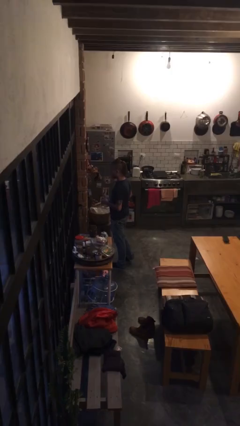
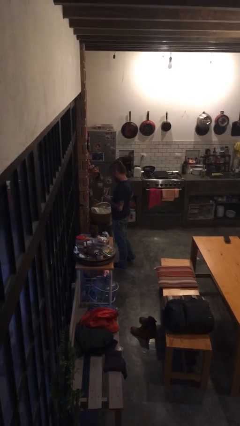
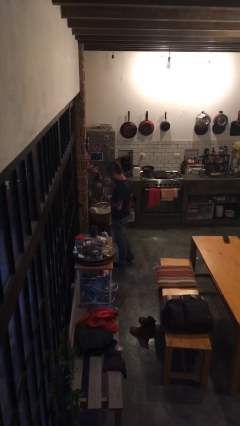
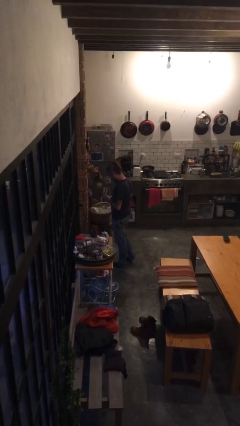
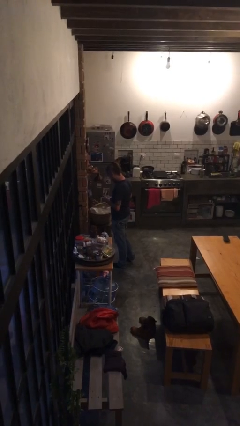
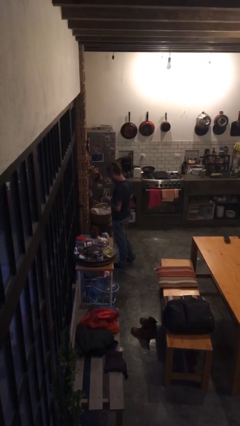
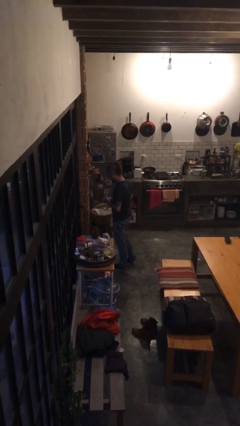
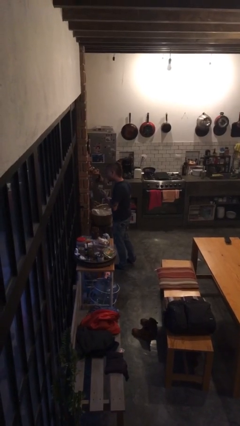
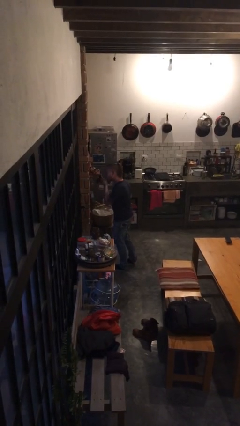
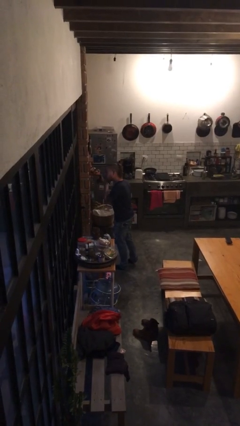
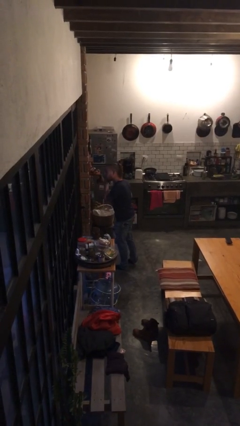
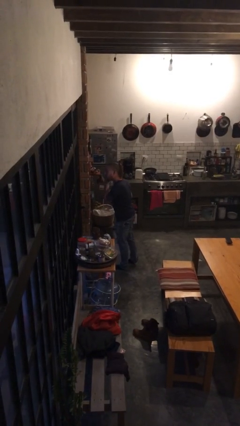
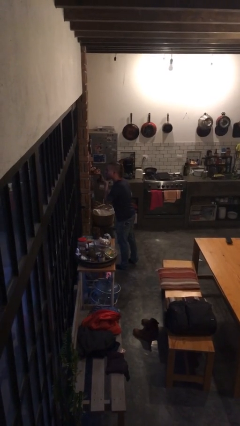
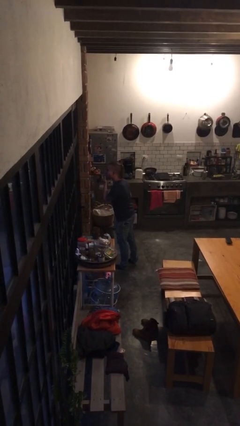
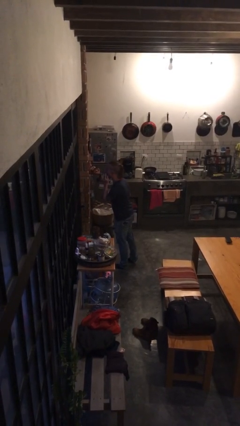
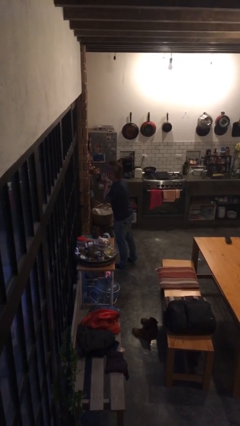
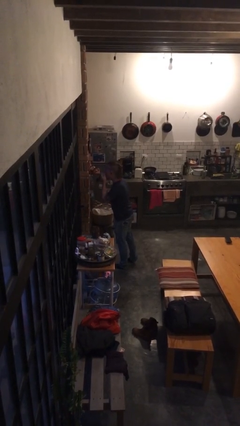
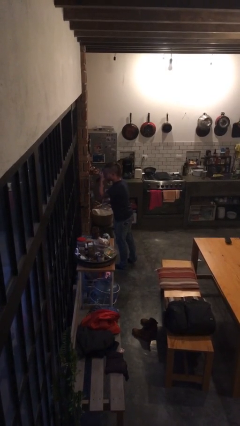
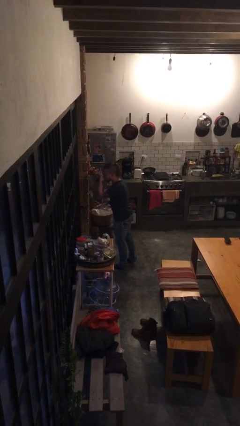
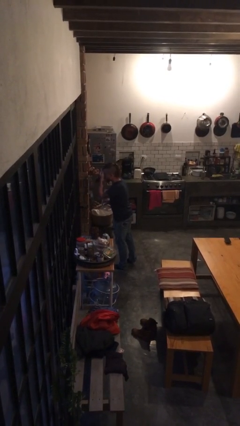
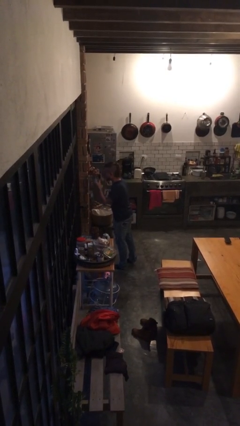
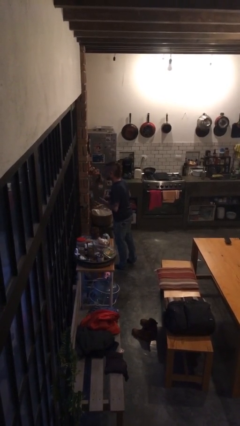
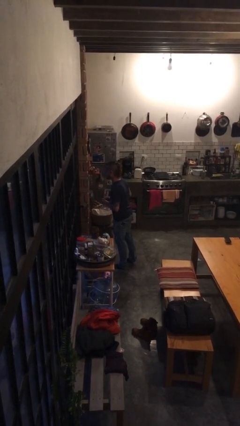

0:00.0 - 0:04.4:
person applies foundation makeup

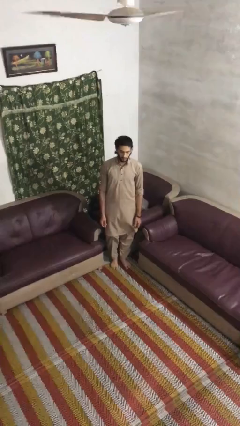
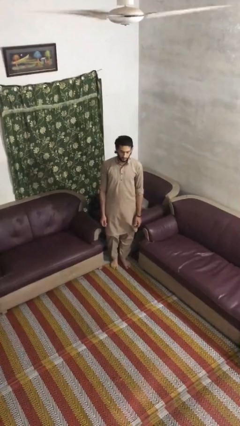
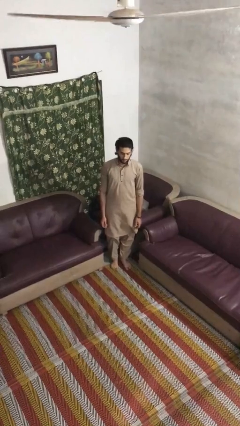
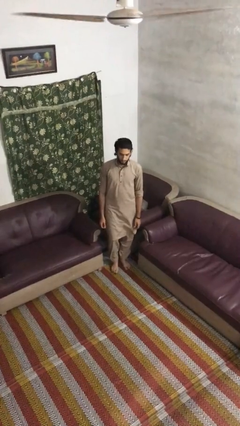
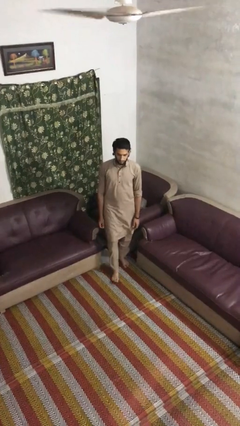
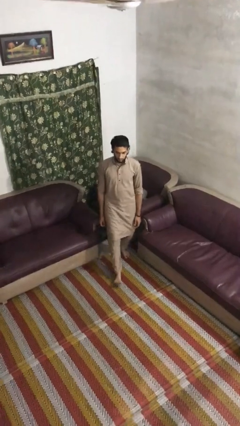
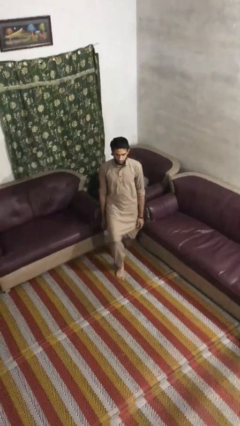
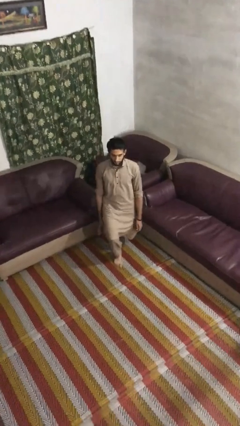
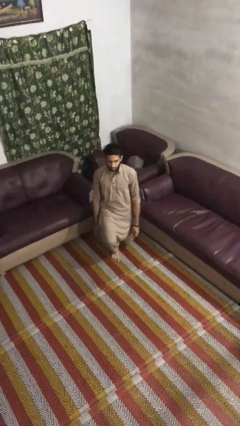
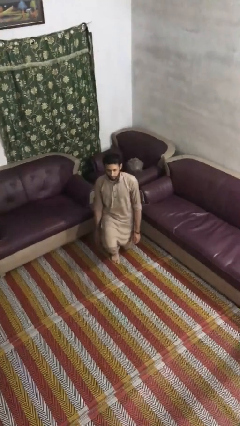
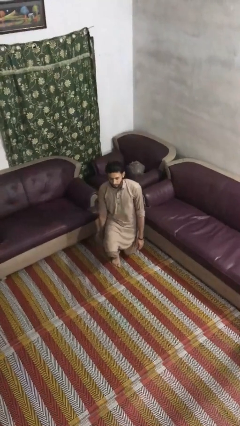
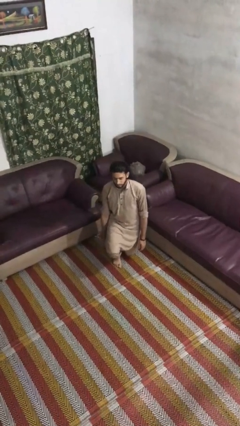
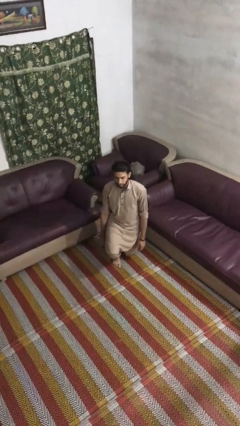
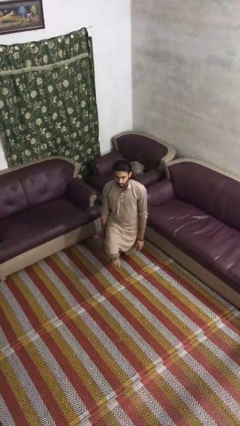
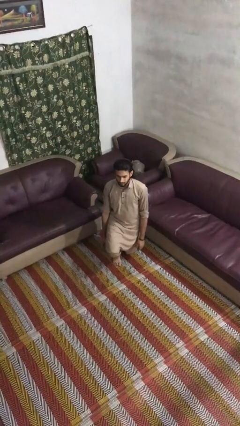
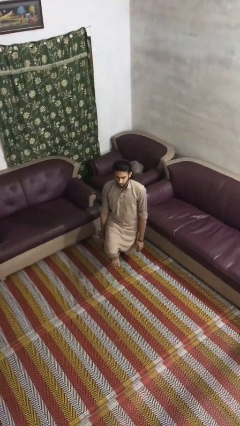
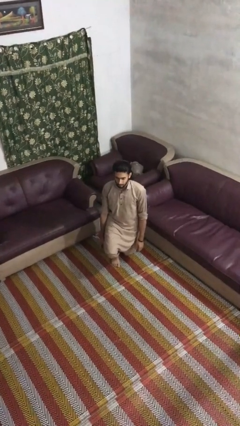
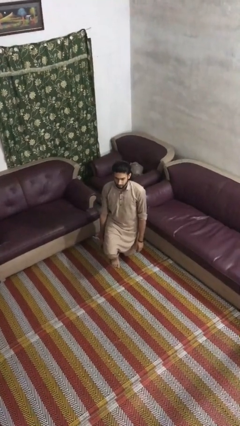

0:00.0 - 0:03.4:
person kneels

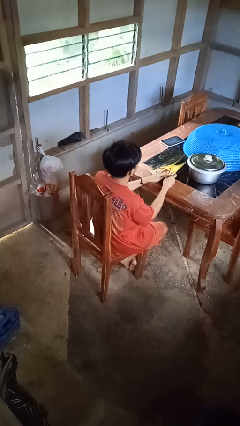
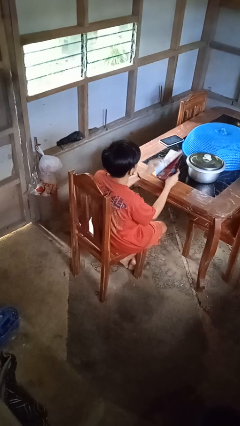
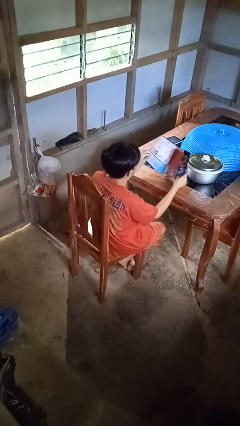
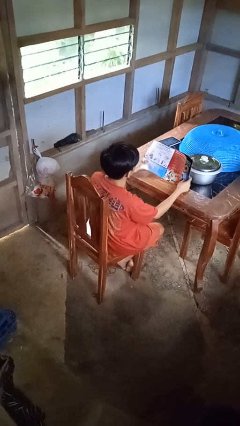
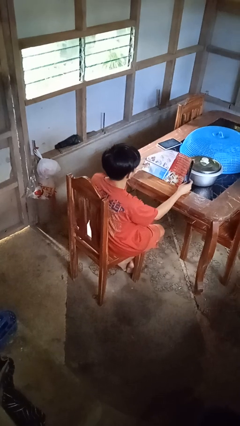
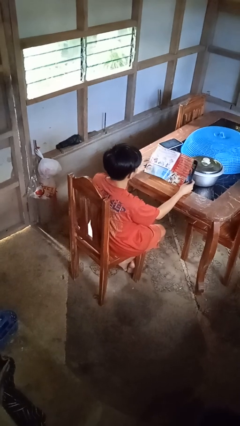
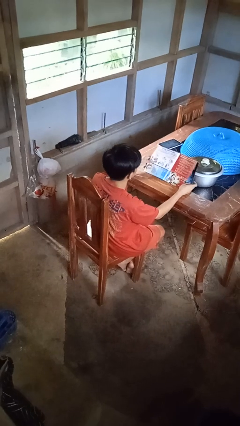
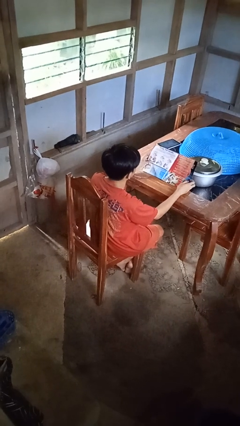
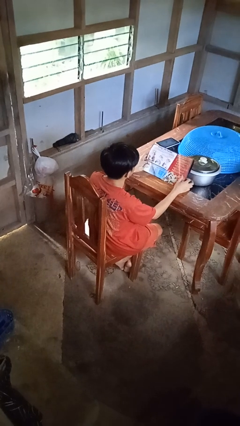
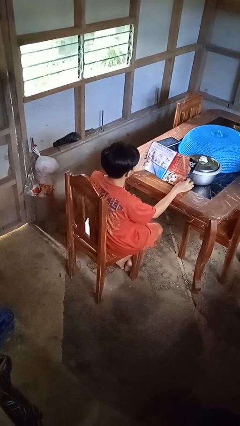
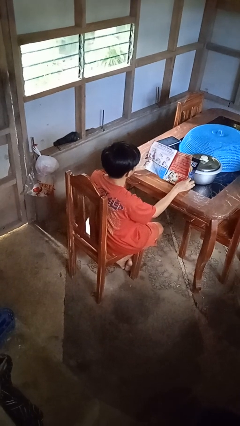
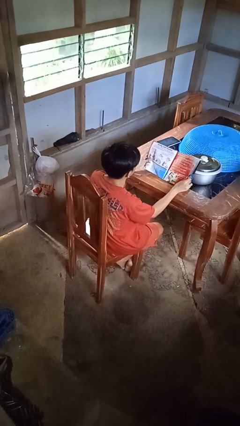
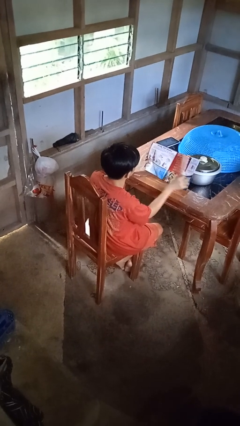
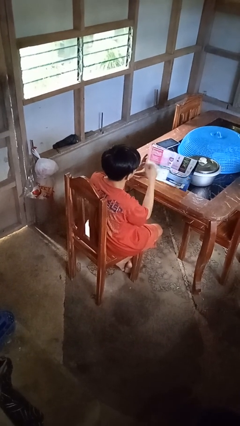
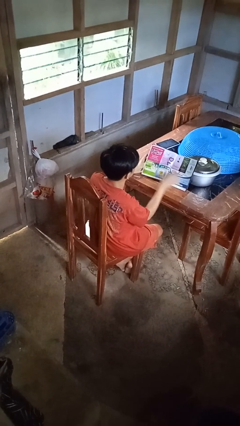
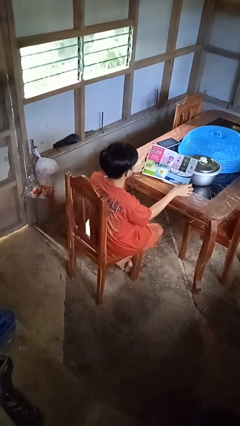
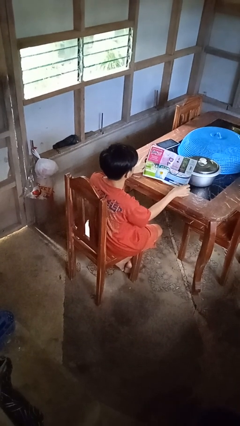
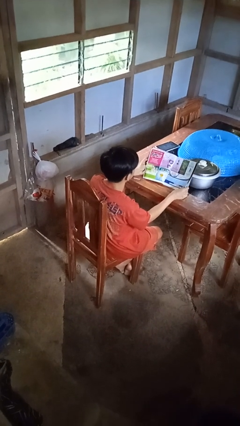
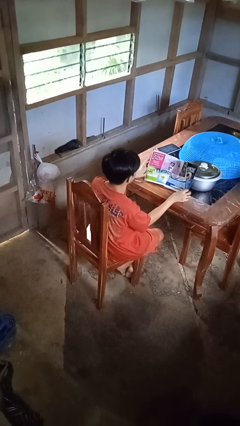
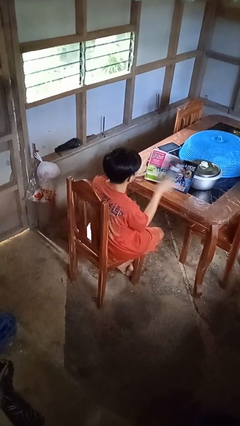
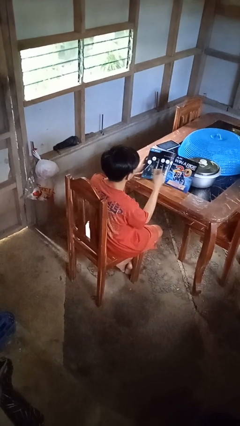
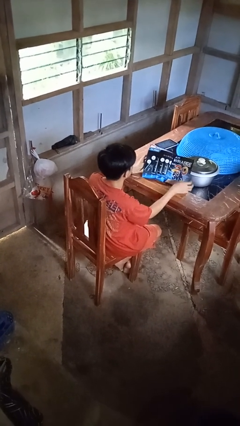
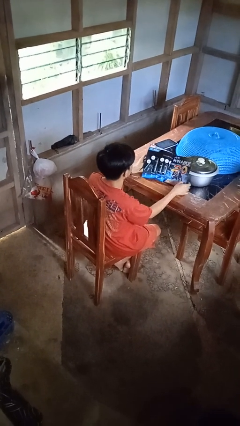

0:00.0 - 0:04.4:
person reads magazine

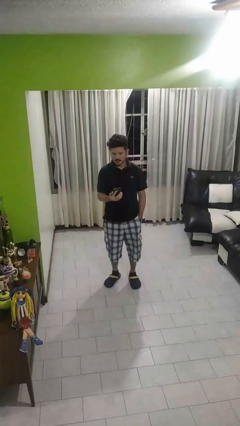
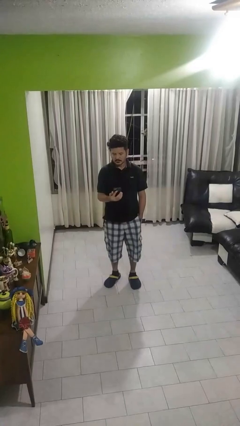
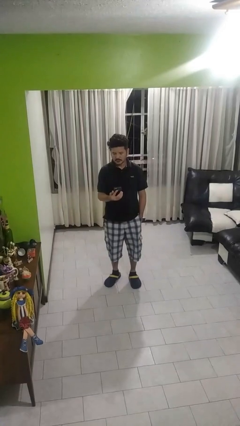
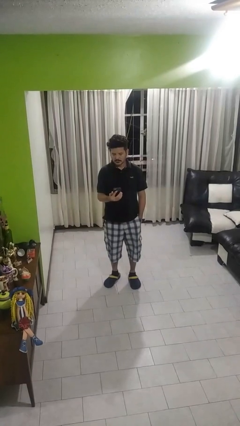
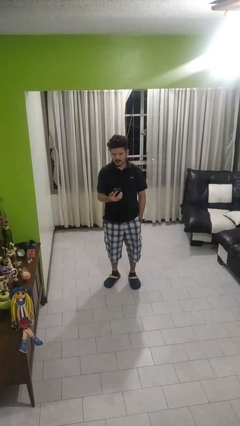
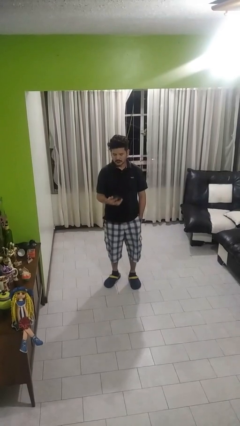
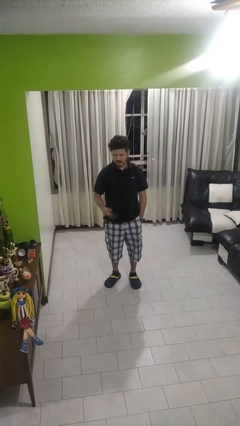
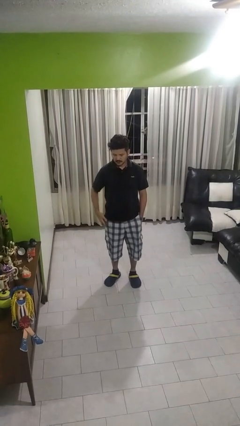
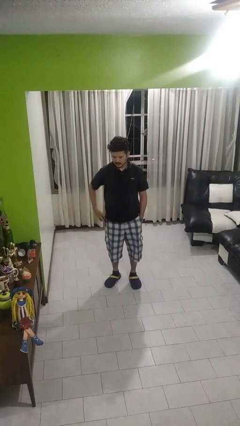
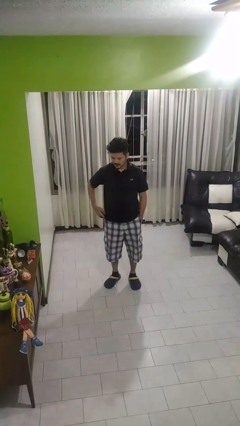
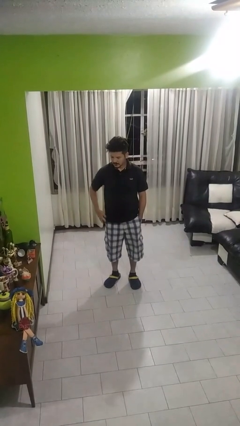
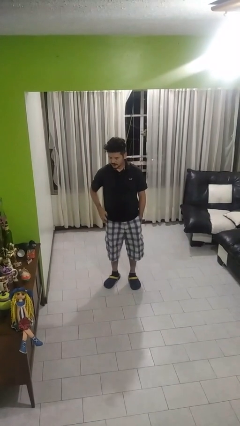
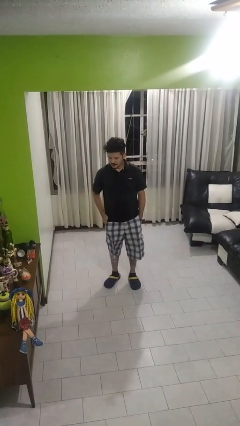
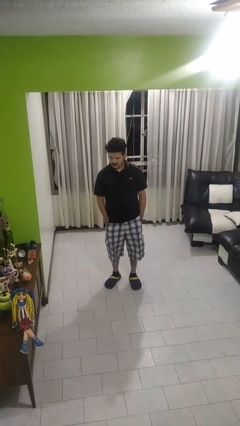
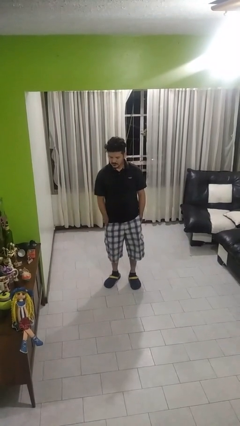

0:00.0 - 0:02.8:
person puts phone into pocket

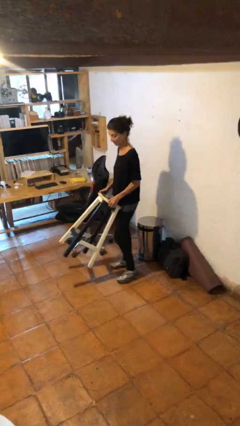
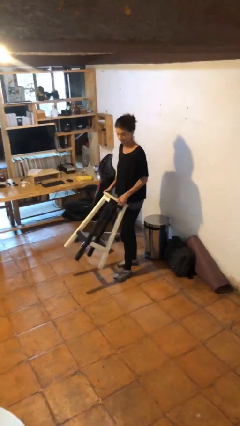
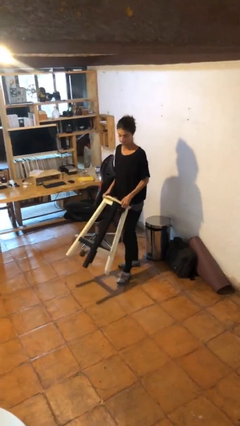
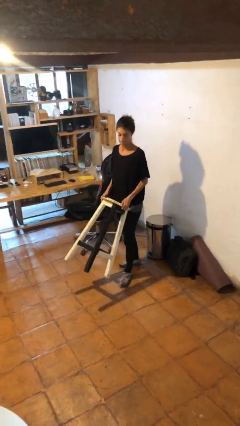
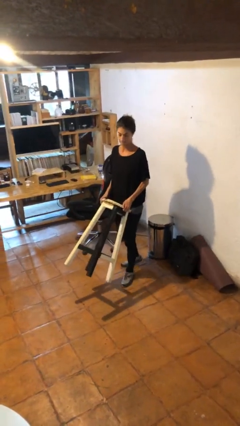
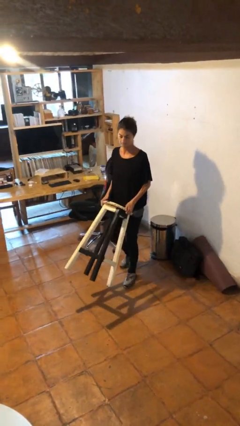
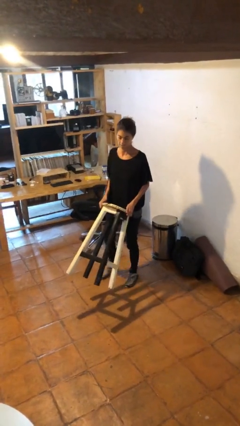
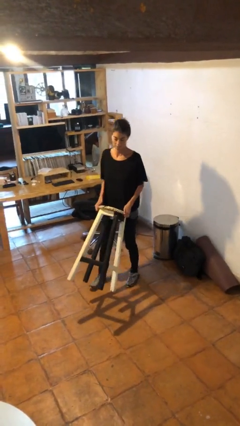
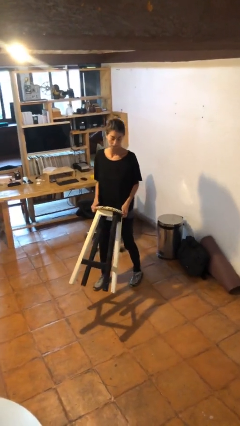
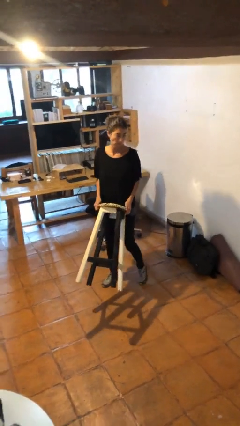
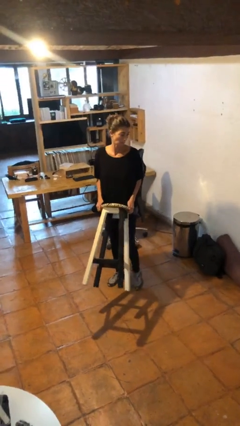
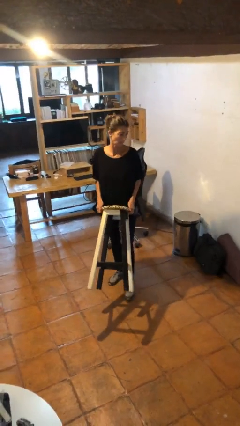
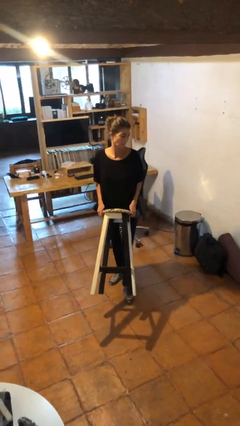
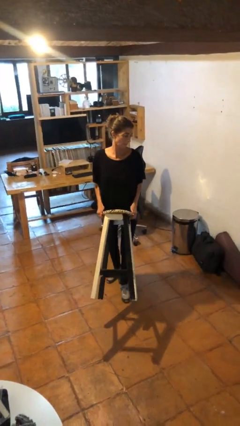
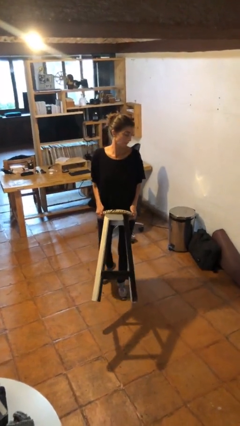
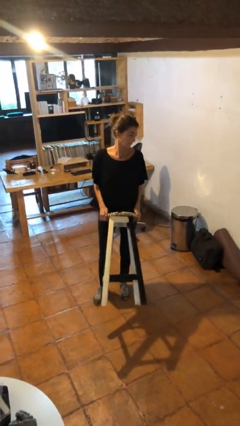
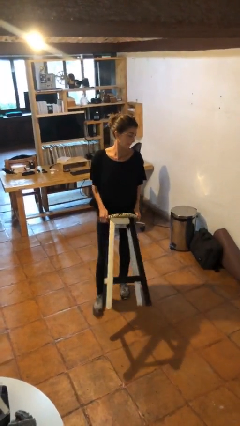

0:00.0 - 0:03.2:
person carries furniture
